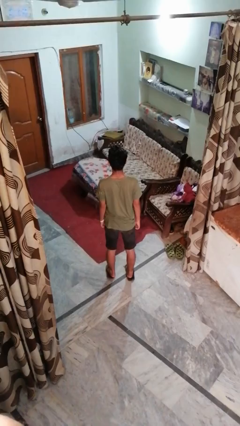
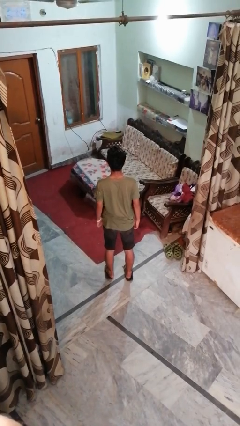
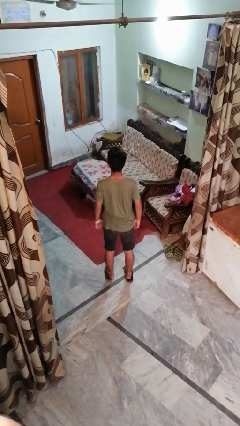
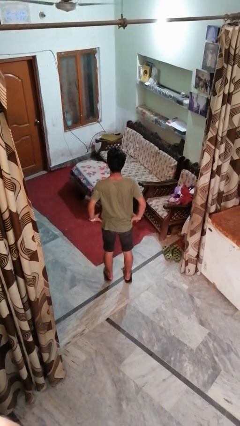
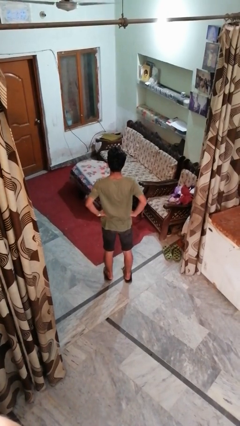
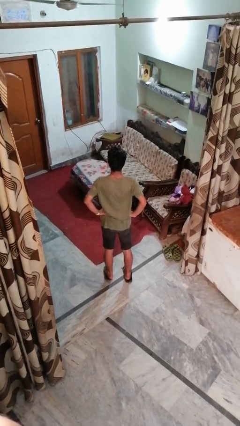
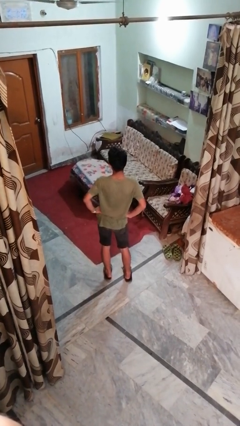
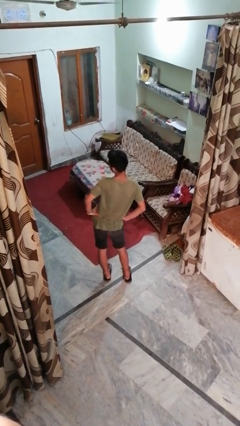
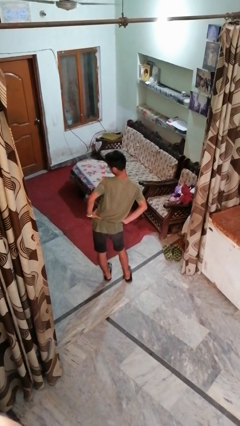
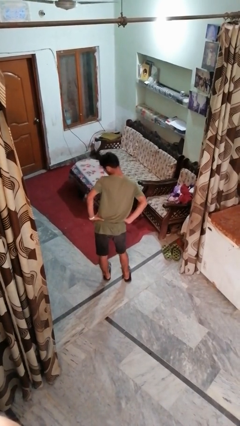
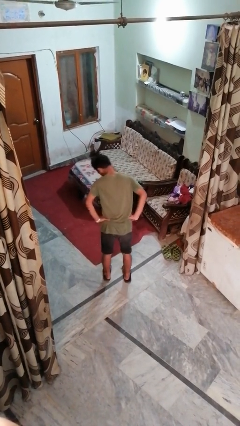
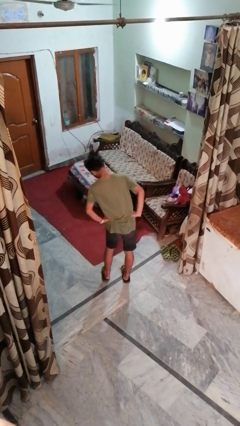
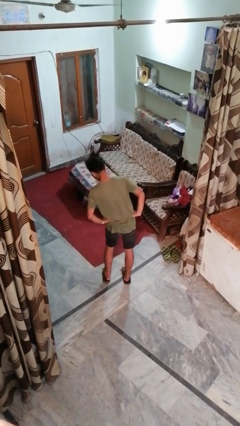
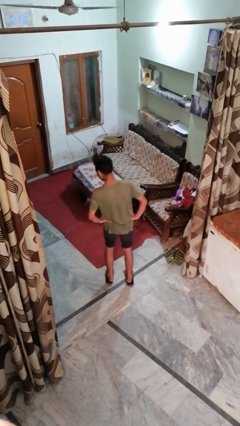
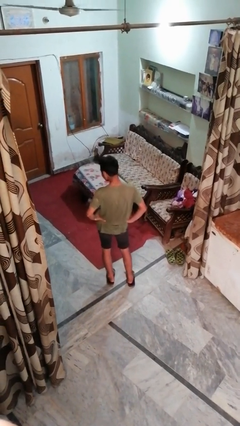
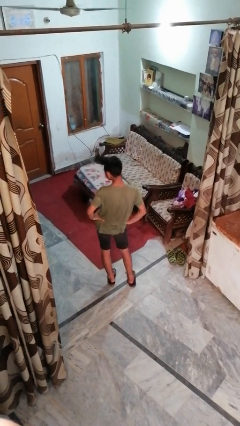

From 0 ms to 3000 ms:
person wiggles hips

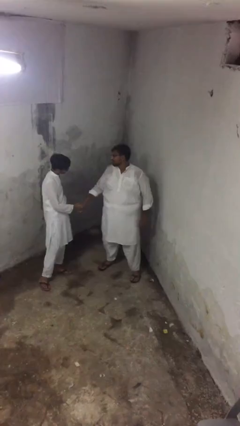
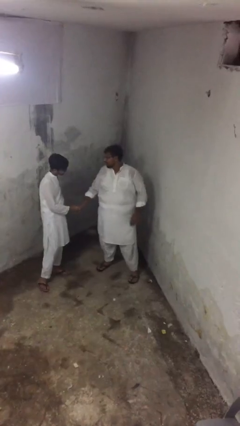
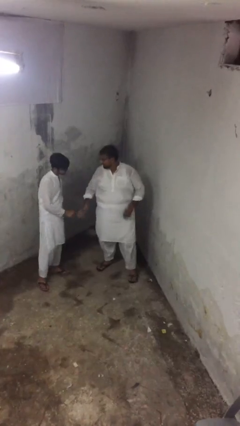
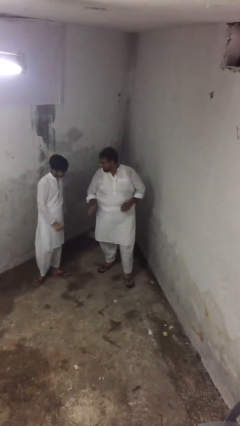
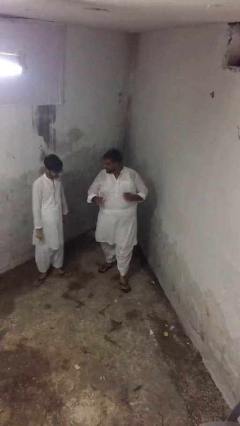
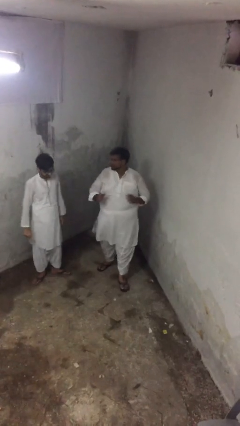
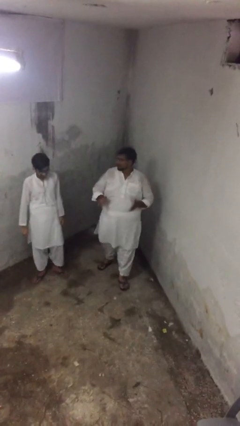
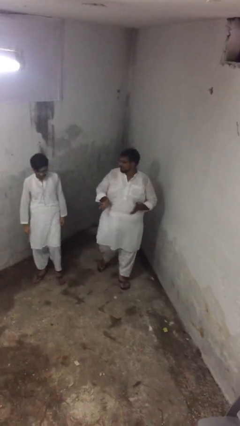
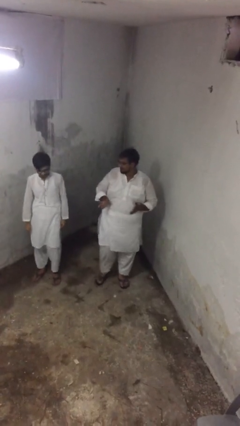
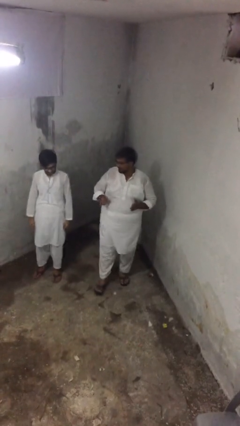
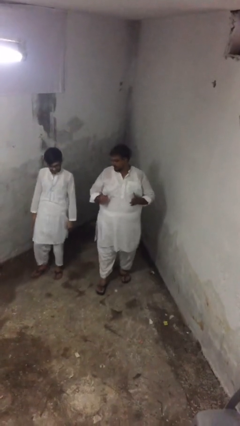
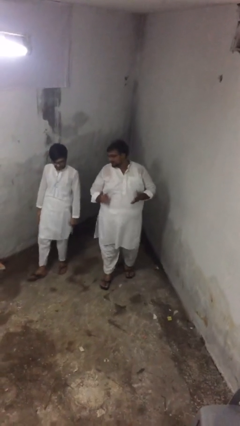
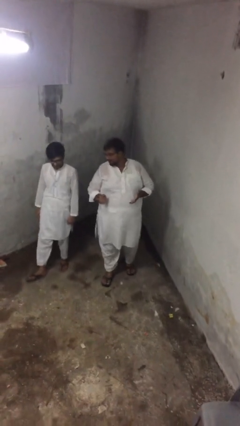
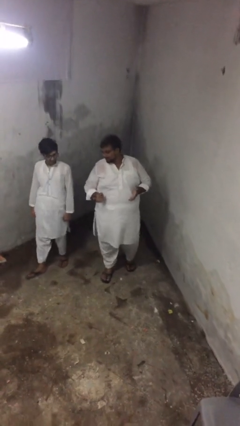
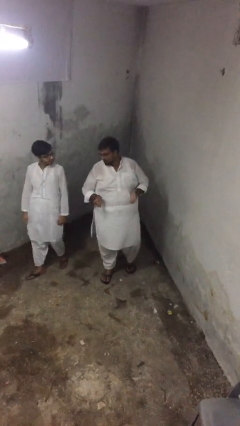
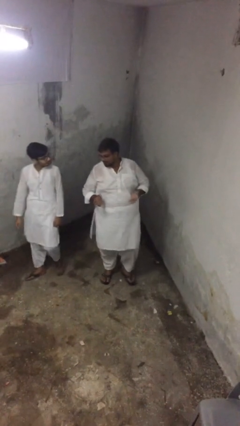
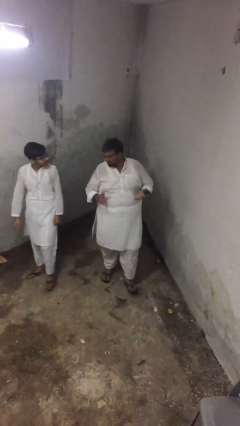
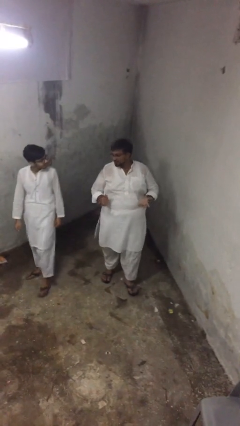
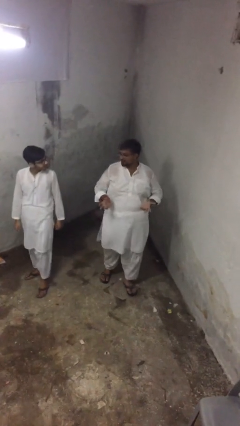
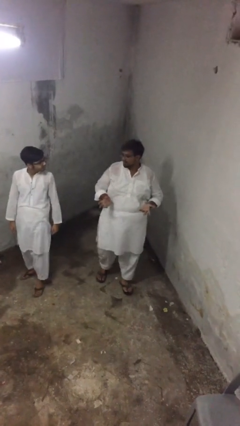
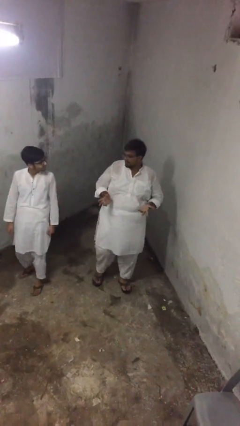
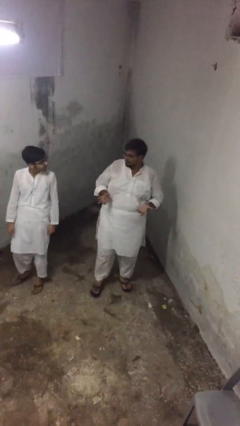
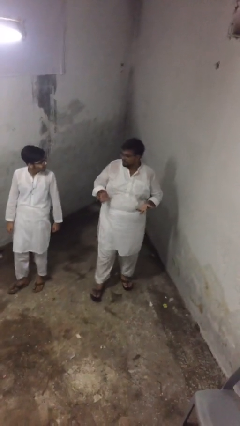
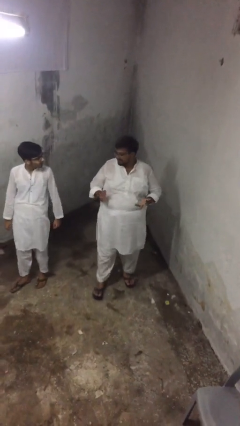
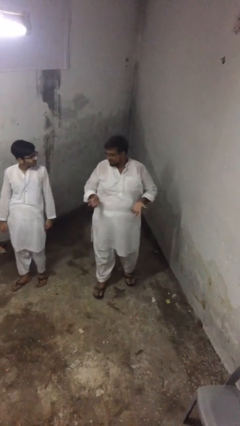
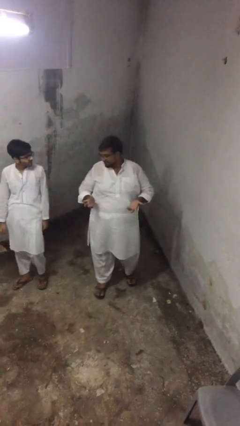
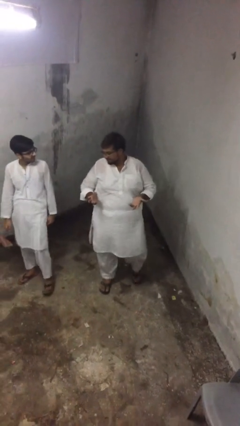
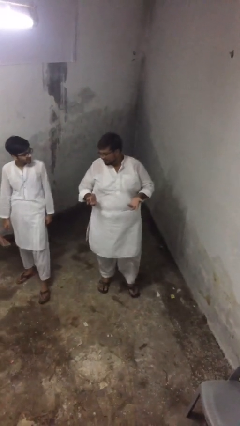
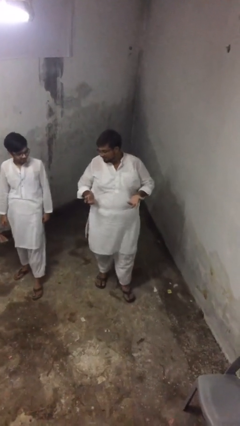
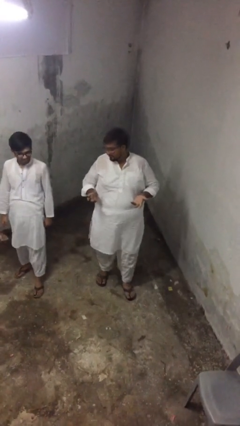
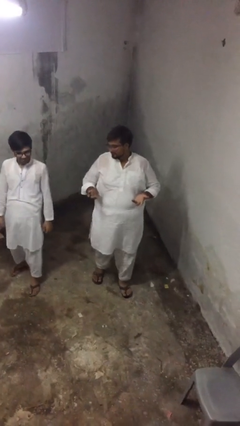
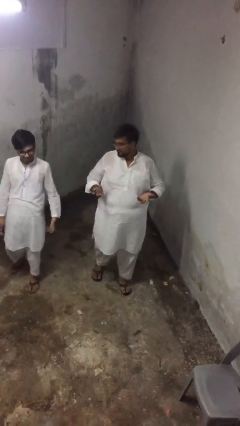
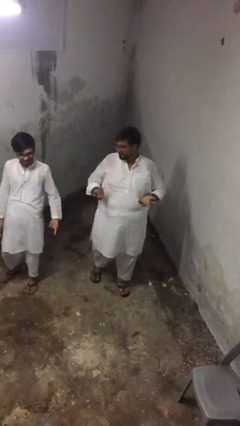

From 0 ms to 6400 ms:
person talks to person

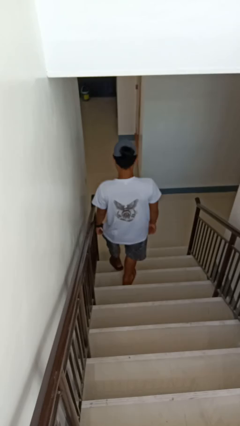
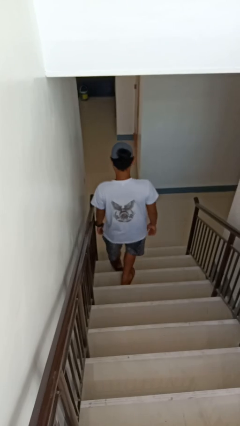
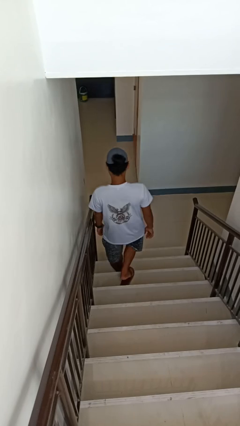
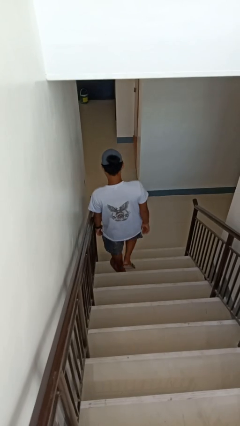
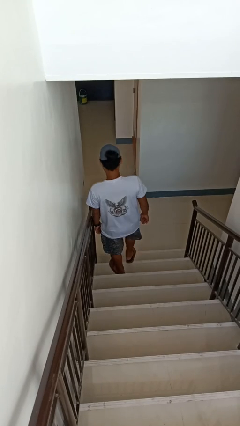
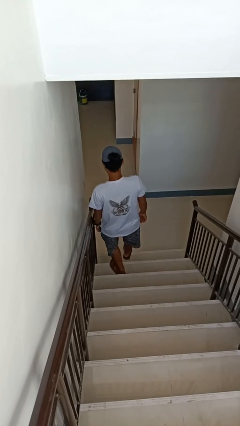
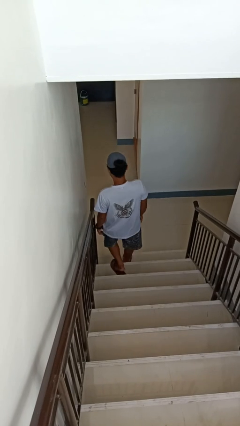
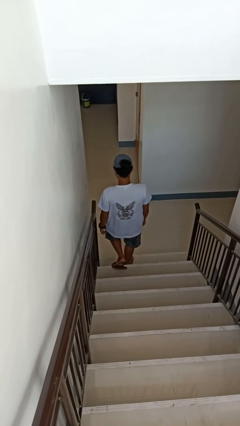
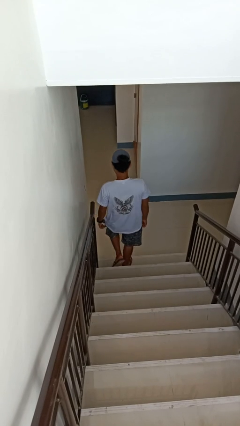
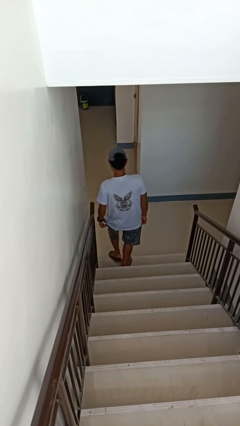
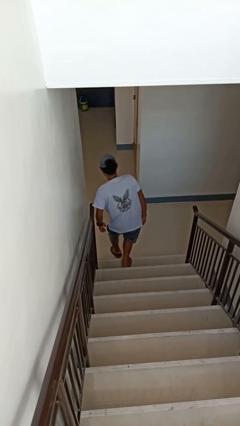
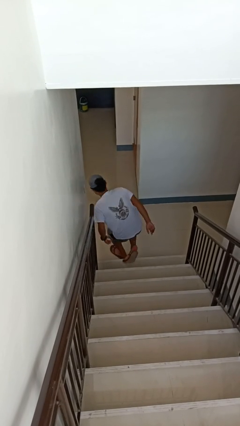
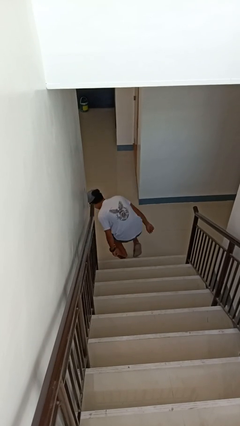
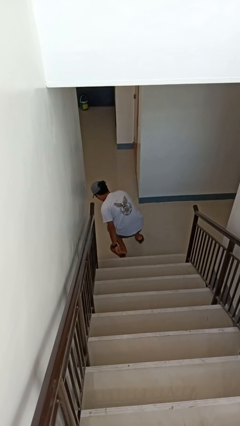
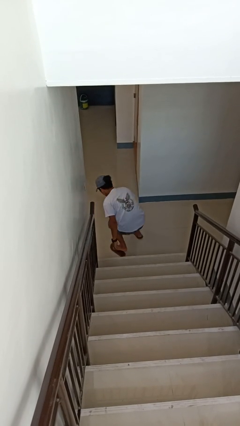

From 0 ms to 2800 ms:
person climbs down stairs

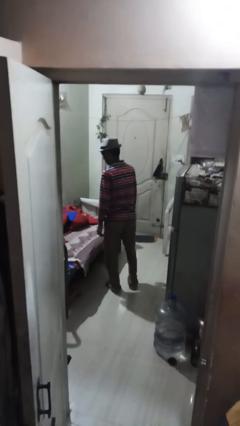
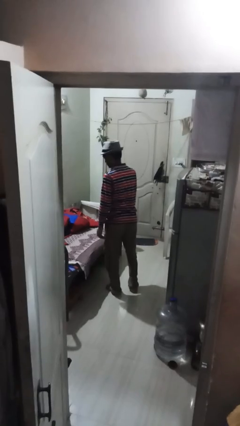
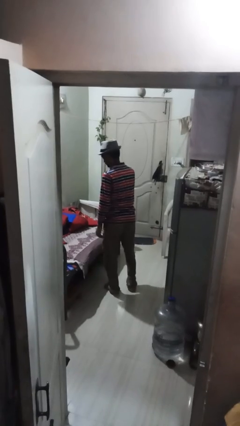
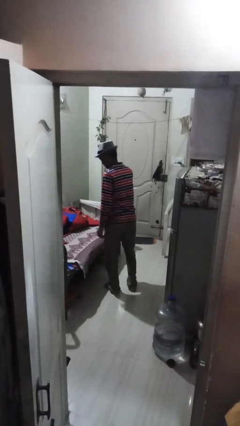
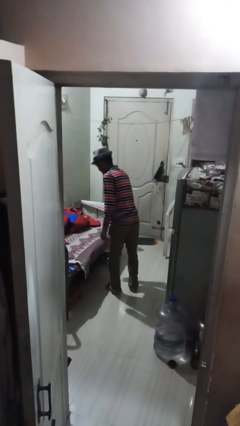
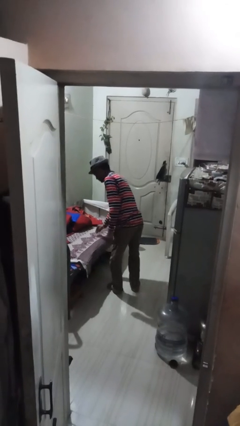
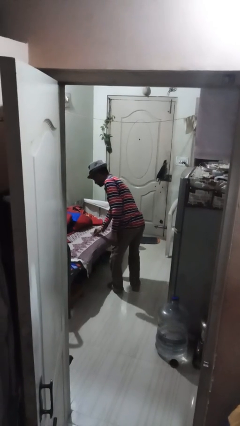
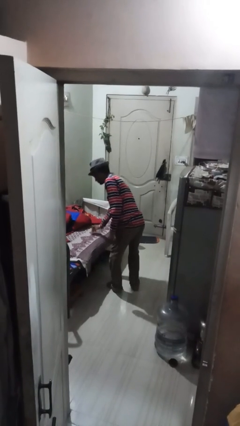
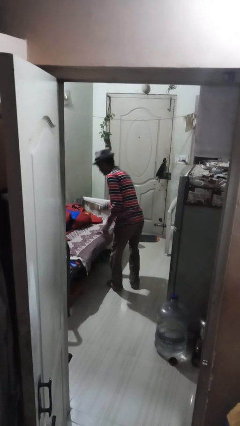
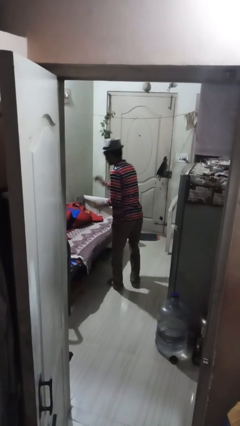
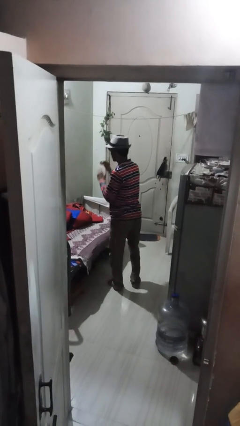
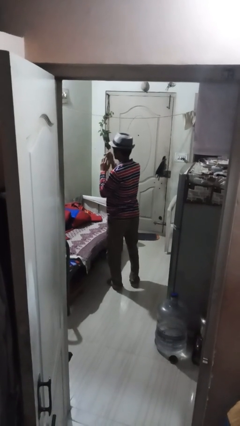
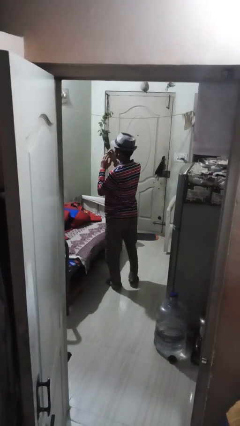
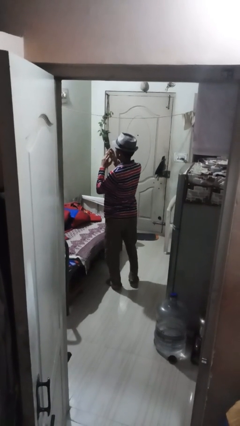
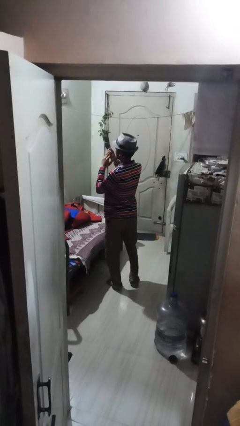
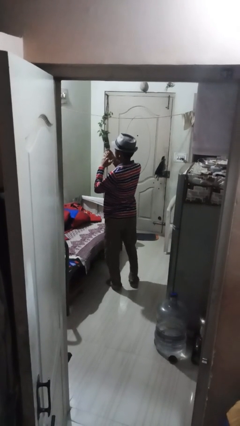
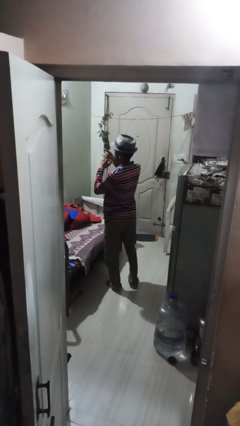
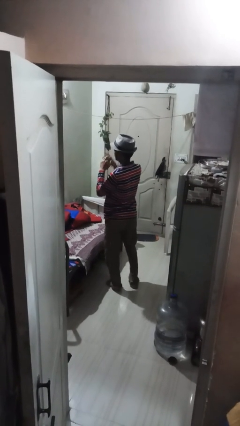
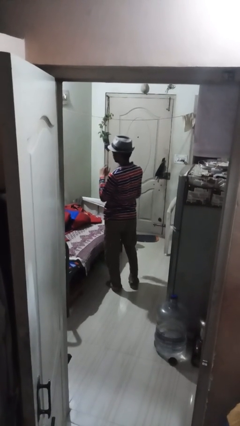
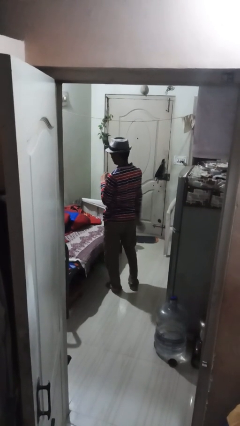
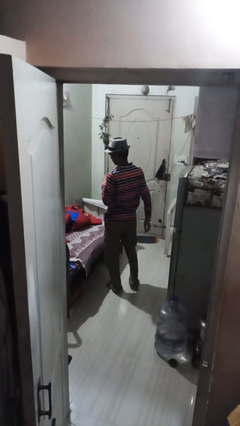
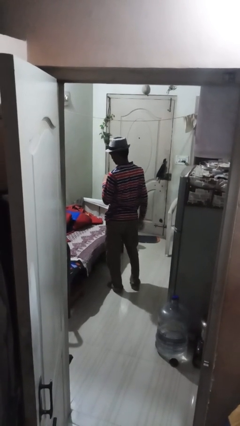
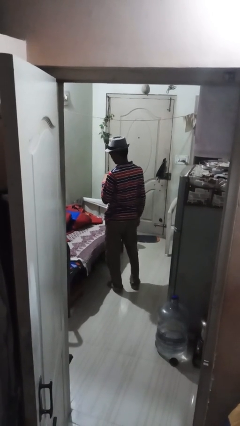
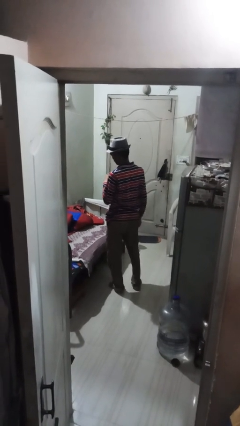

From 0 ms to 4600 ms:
person puts on ring

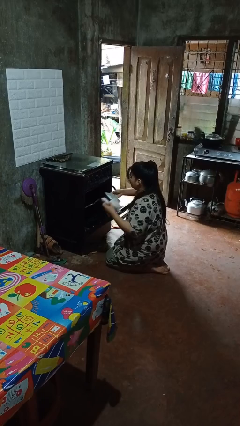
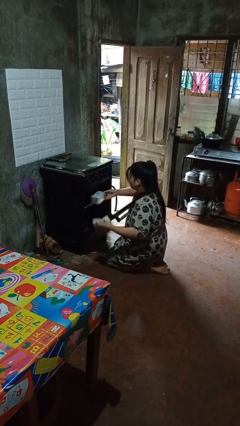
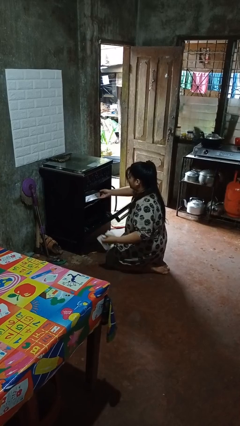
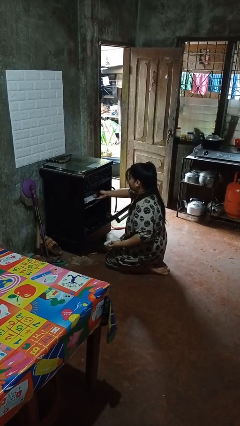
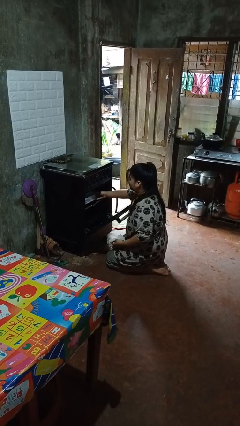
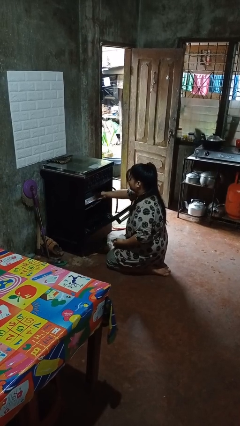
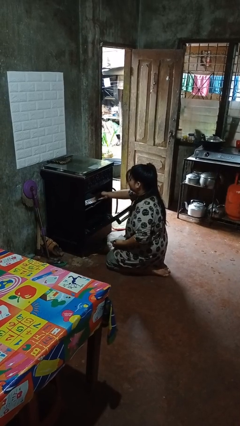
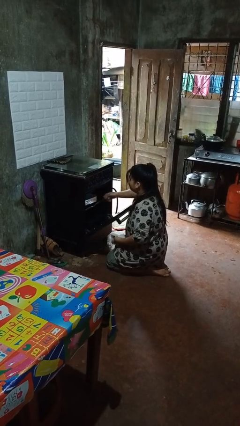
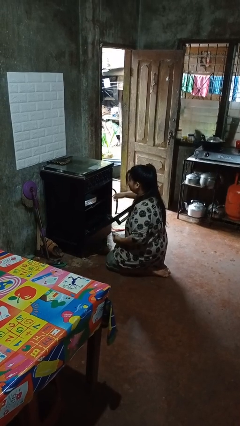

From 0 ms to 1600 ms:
person puts object into oven
